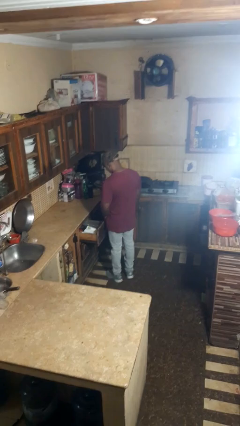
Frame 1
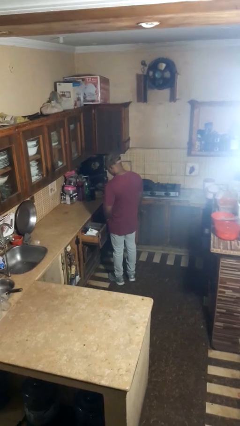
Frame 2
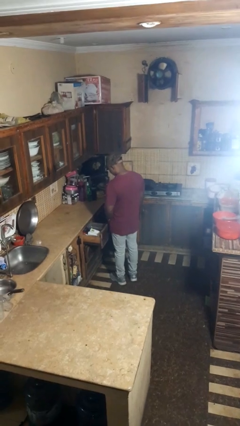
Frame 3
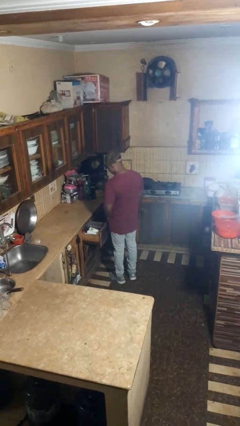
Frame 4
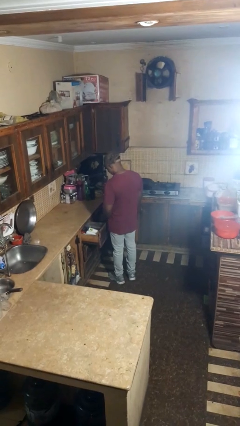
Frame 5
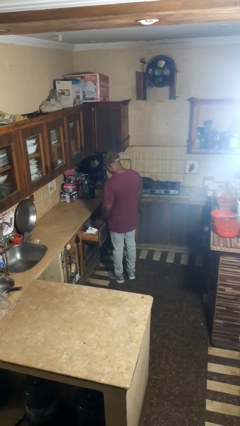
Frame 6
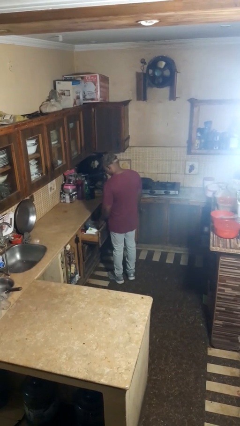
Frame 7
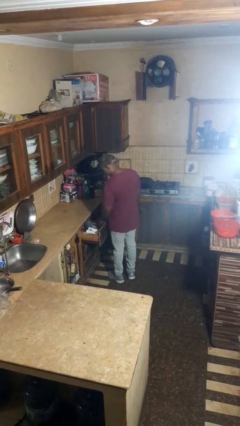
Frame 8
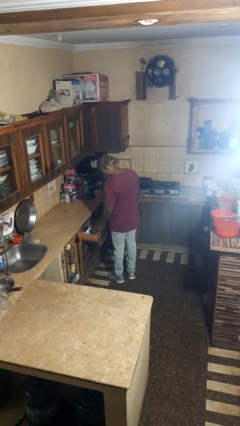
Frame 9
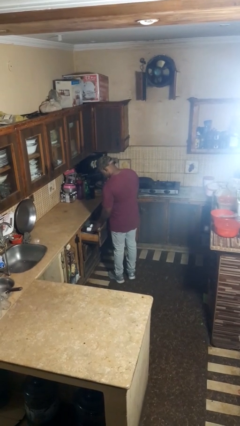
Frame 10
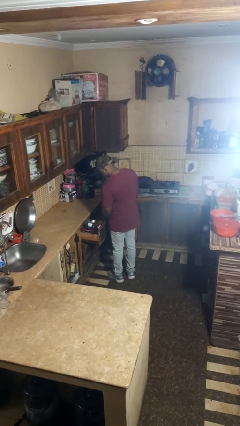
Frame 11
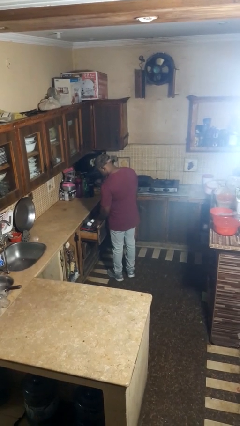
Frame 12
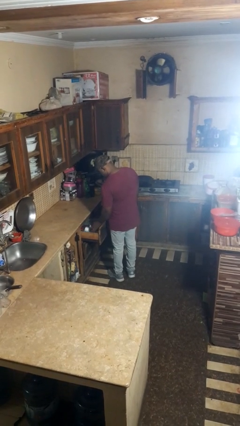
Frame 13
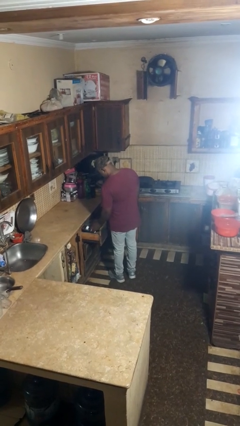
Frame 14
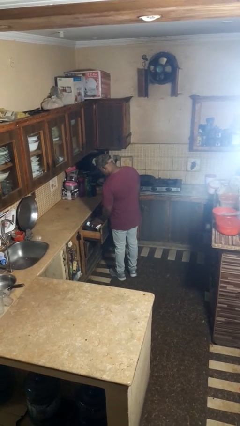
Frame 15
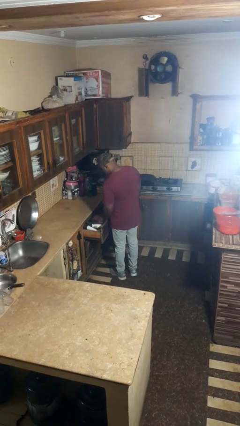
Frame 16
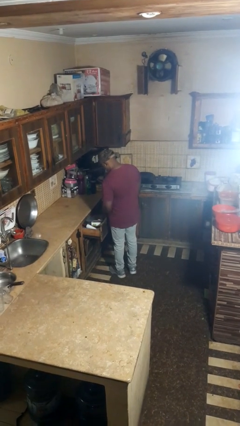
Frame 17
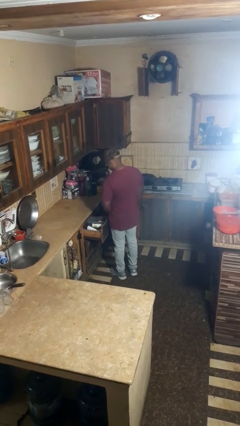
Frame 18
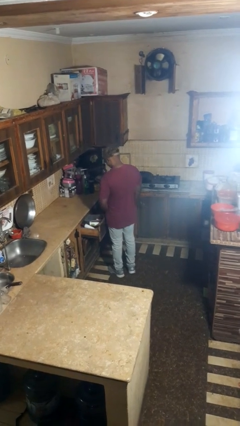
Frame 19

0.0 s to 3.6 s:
person searches in kitchen drawer

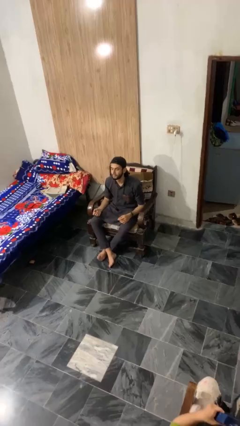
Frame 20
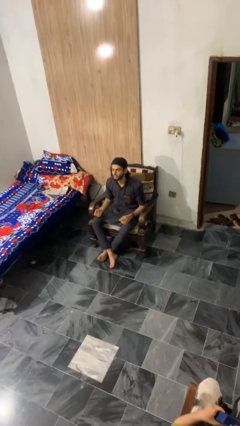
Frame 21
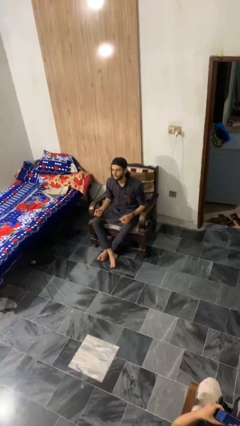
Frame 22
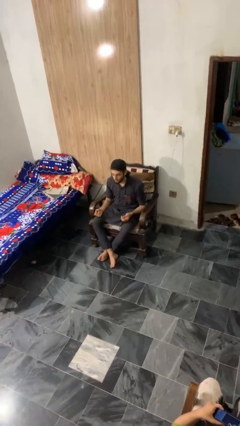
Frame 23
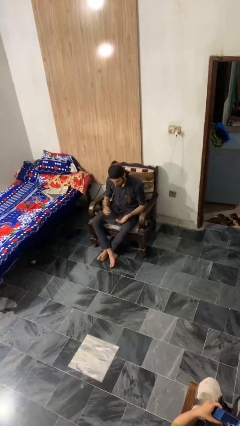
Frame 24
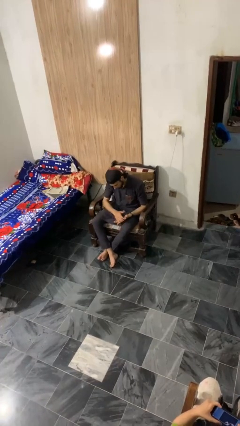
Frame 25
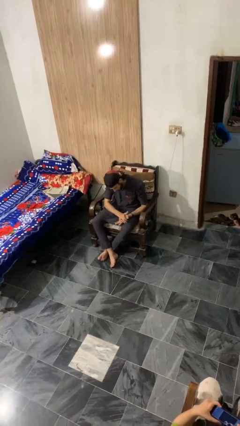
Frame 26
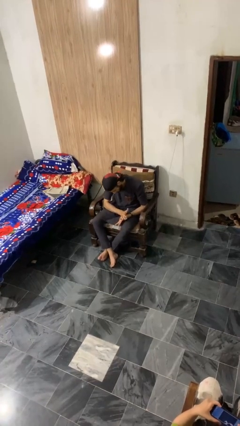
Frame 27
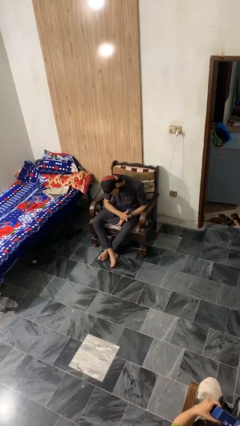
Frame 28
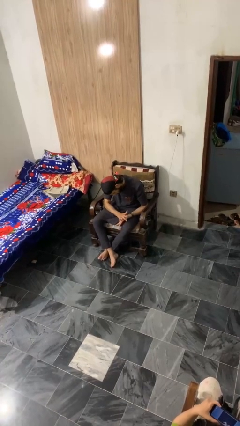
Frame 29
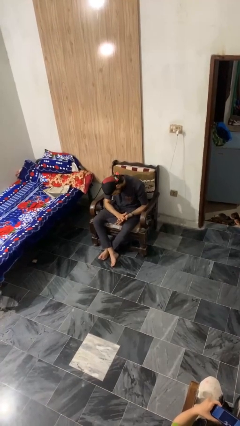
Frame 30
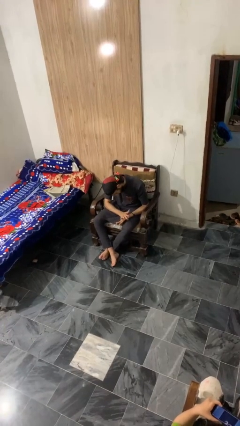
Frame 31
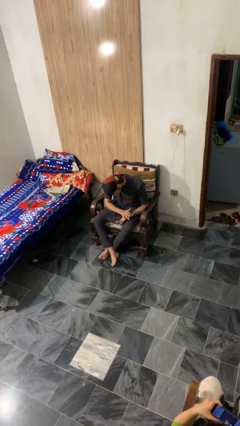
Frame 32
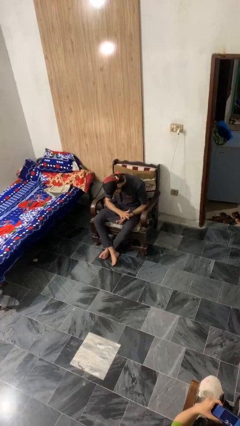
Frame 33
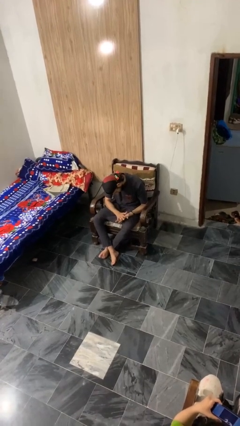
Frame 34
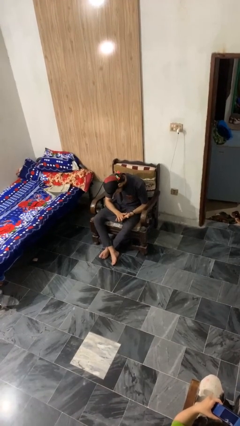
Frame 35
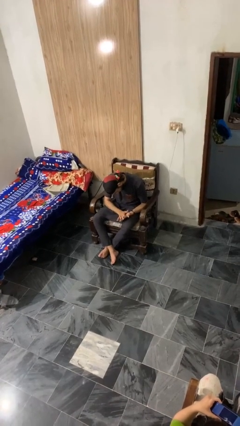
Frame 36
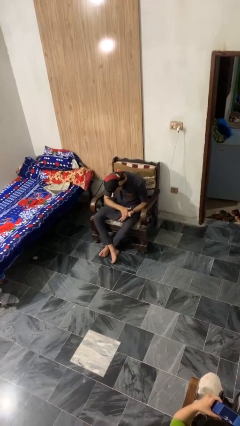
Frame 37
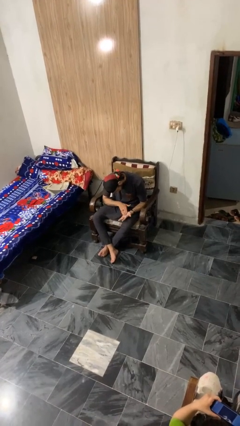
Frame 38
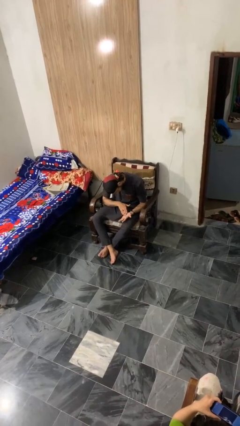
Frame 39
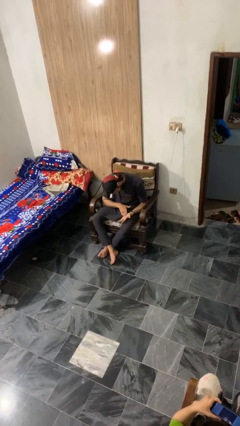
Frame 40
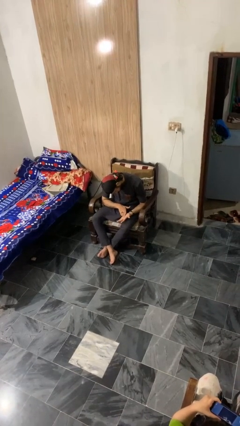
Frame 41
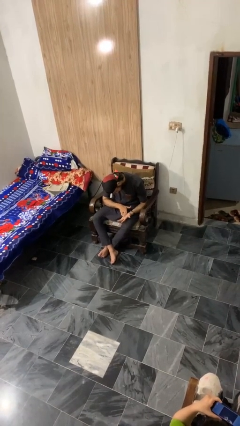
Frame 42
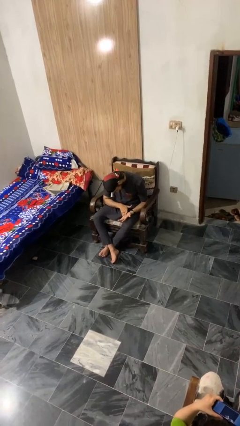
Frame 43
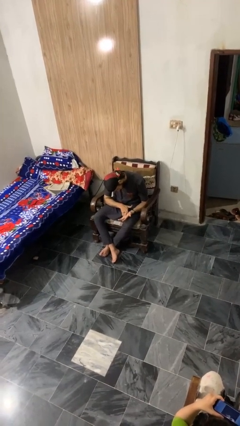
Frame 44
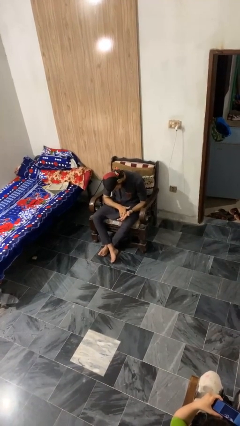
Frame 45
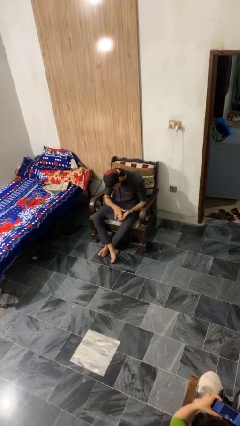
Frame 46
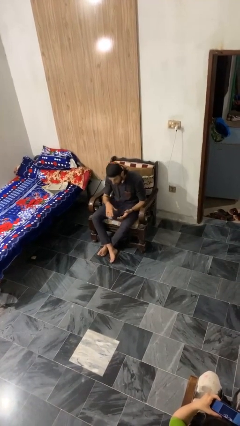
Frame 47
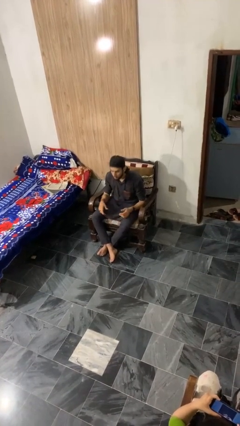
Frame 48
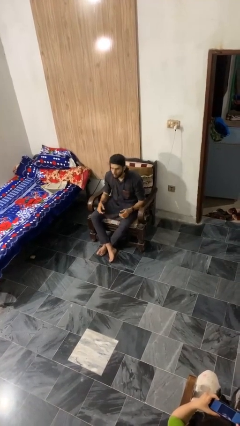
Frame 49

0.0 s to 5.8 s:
person looks at hands in lap

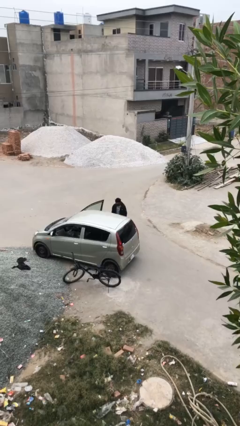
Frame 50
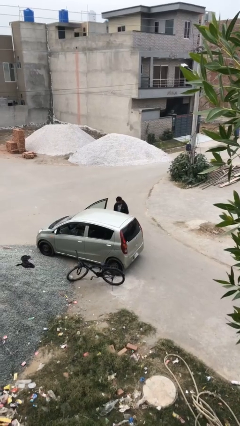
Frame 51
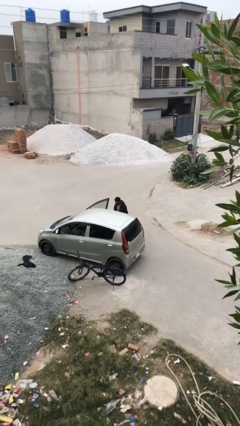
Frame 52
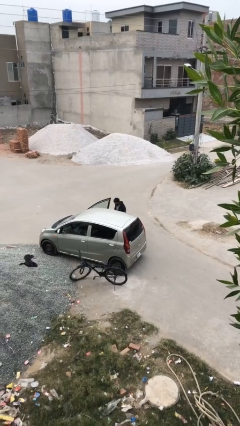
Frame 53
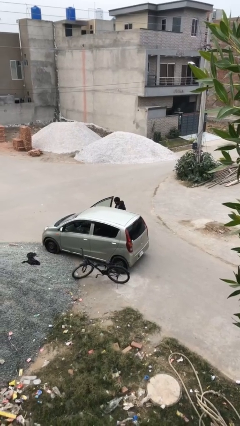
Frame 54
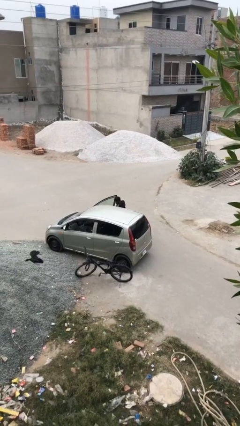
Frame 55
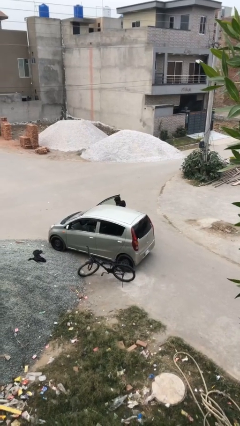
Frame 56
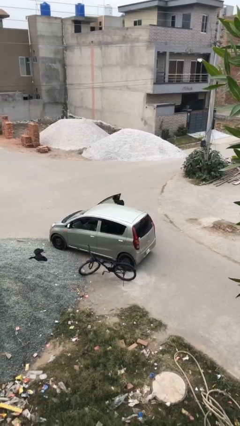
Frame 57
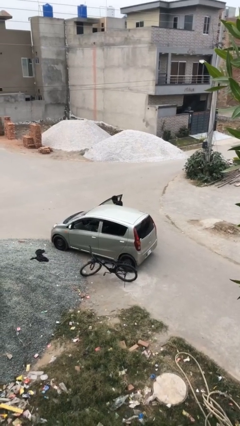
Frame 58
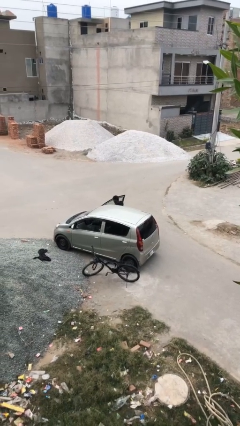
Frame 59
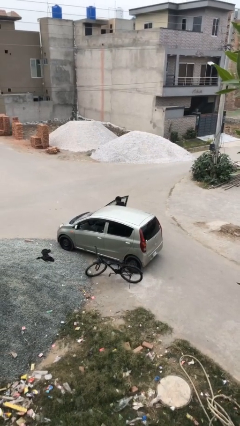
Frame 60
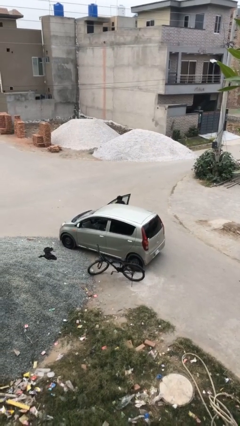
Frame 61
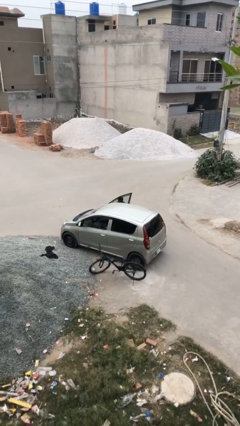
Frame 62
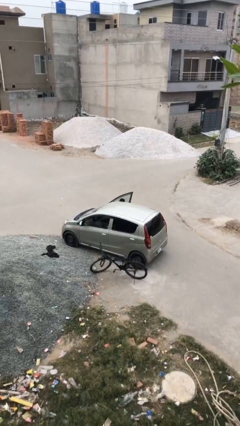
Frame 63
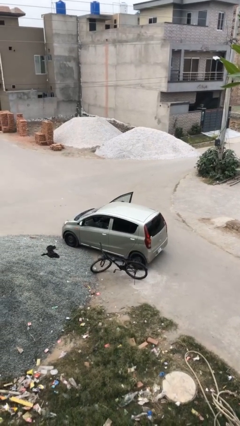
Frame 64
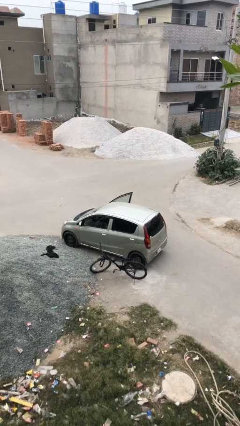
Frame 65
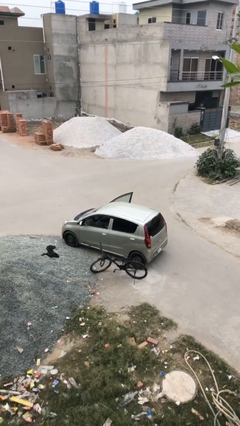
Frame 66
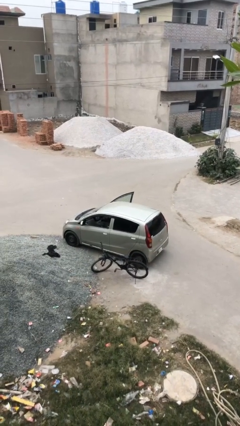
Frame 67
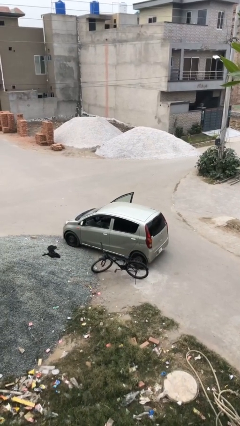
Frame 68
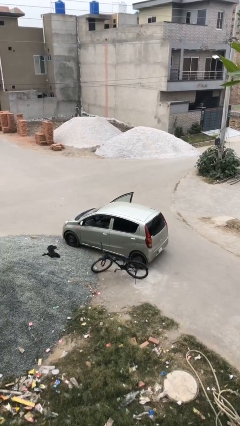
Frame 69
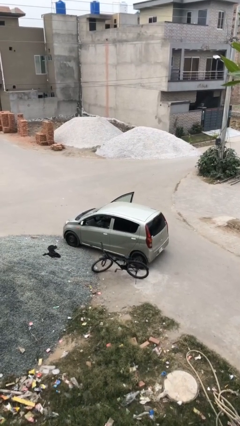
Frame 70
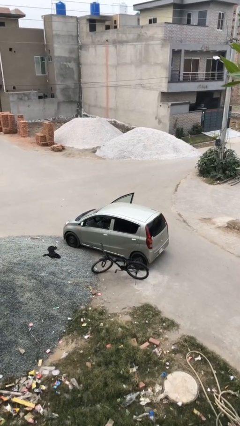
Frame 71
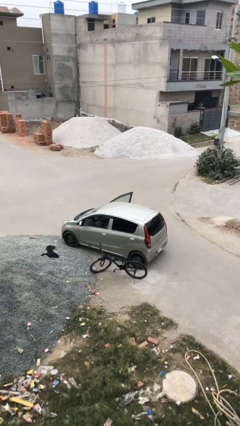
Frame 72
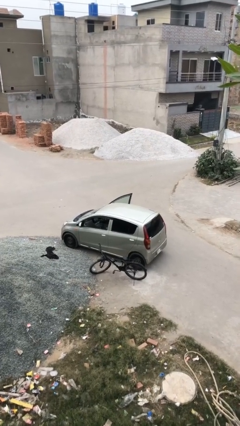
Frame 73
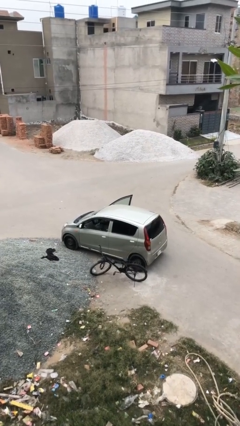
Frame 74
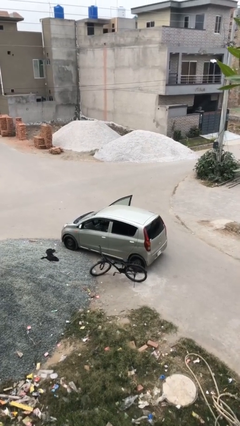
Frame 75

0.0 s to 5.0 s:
person enters car

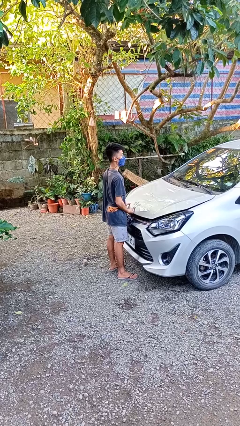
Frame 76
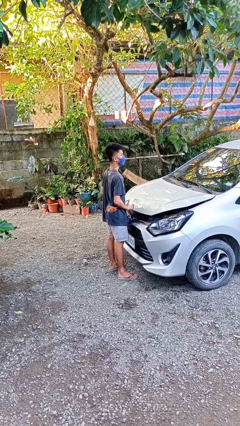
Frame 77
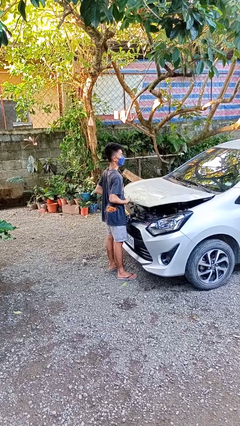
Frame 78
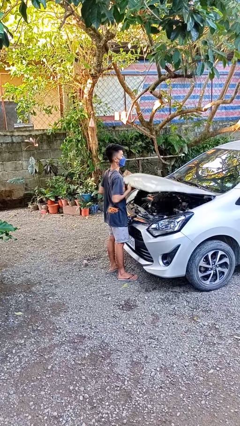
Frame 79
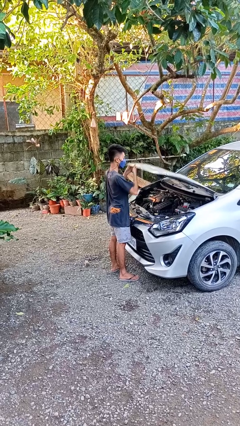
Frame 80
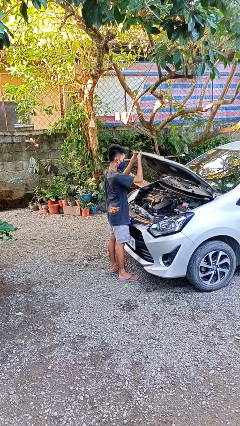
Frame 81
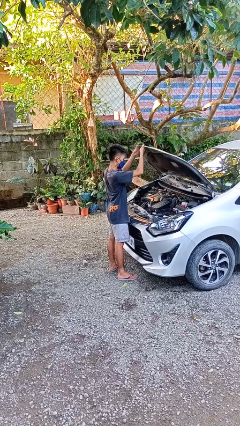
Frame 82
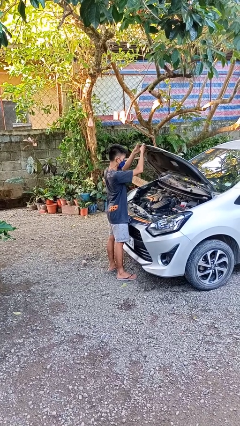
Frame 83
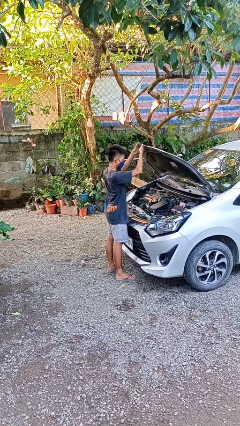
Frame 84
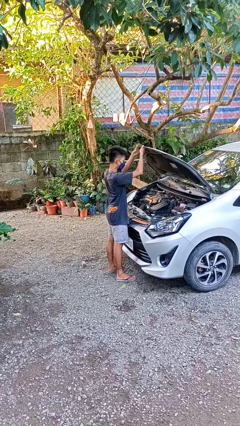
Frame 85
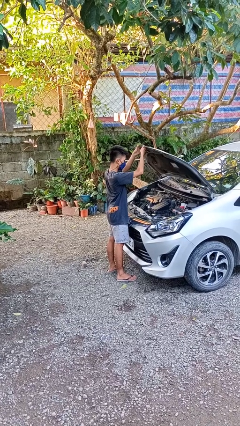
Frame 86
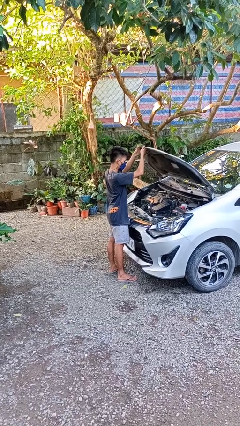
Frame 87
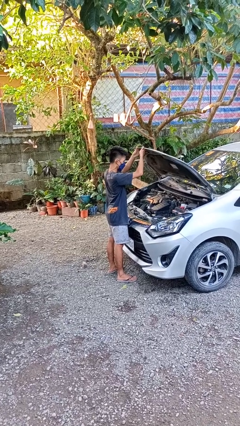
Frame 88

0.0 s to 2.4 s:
person opens car hood

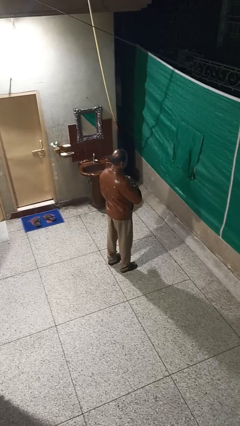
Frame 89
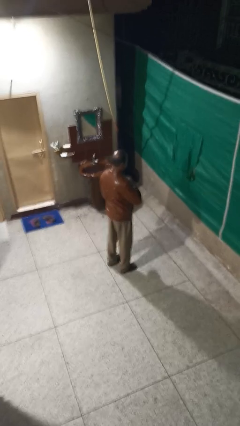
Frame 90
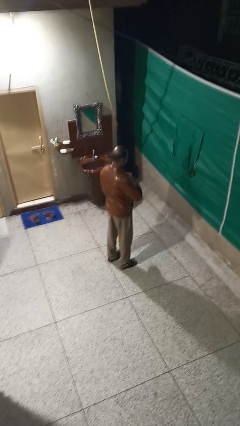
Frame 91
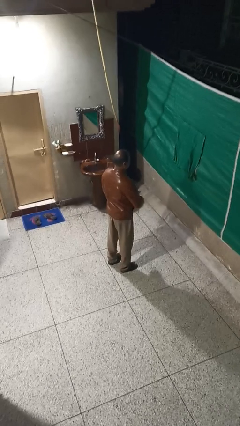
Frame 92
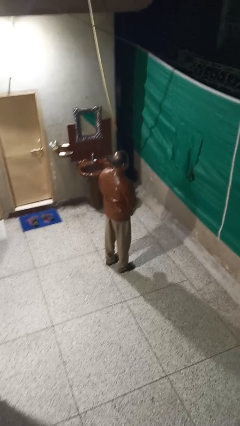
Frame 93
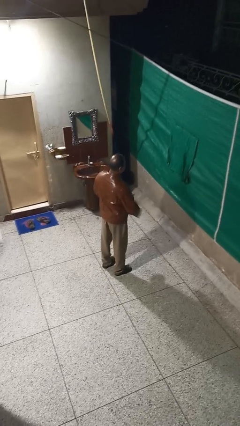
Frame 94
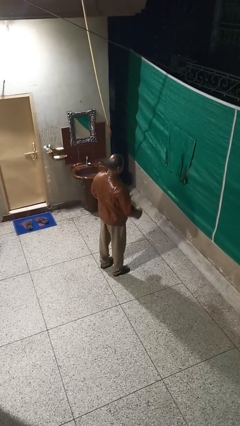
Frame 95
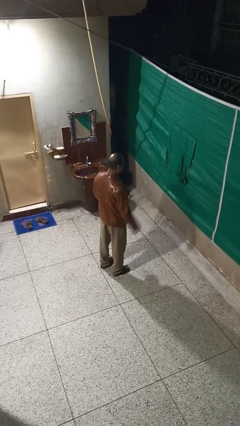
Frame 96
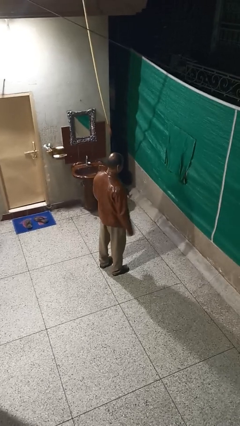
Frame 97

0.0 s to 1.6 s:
person unzips jacket
